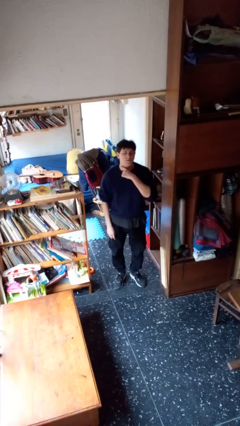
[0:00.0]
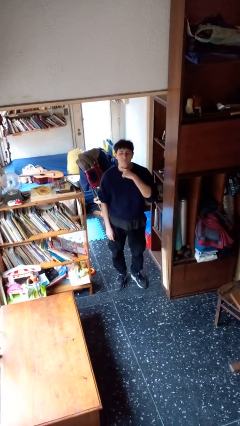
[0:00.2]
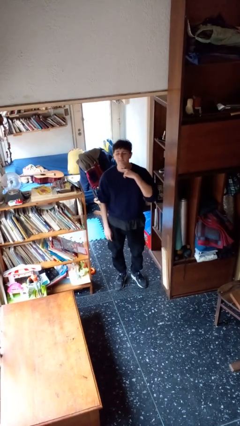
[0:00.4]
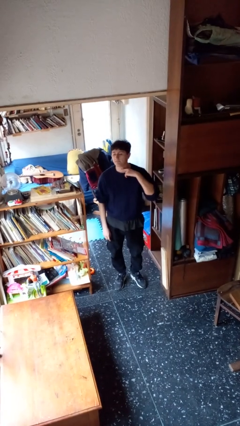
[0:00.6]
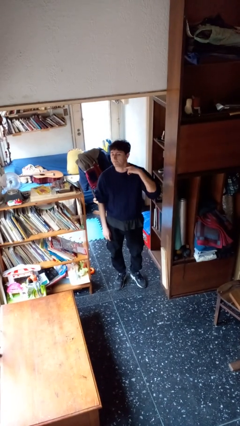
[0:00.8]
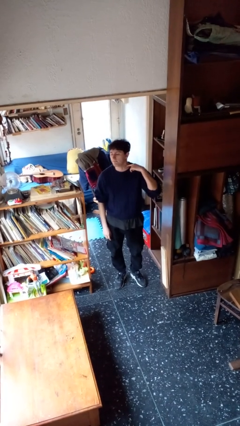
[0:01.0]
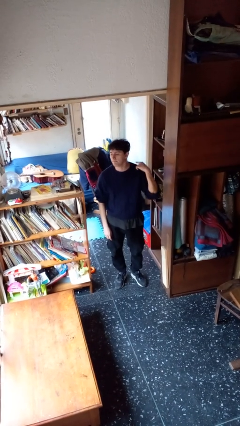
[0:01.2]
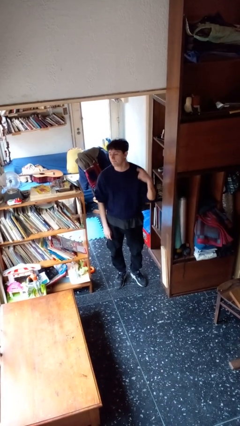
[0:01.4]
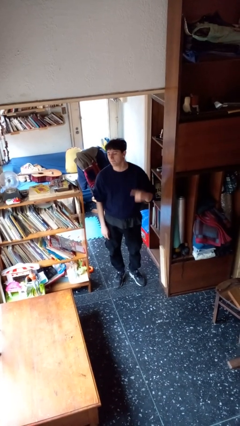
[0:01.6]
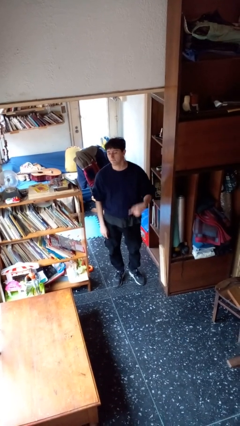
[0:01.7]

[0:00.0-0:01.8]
person gestures cut

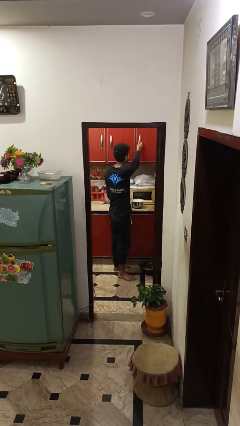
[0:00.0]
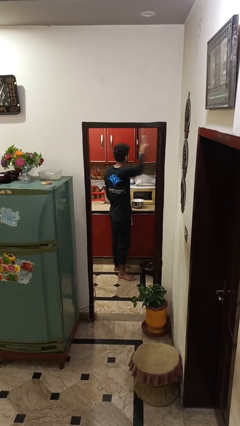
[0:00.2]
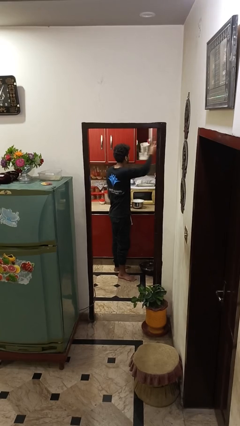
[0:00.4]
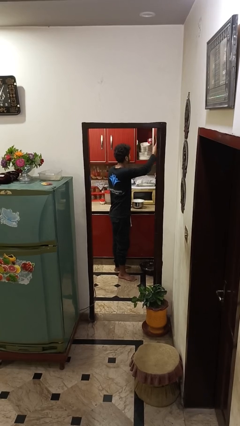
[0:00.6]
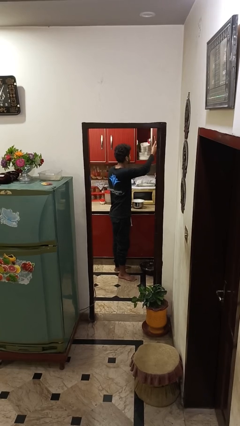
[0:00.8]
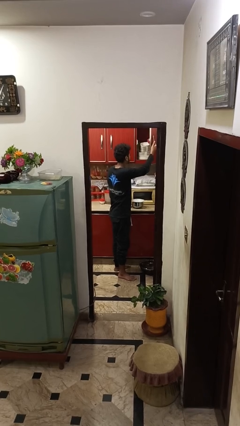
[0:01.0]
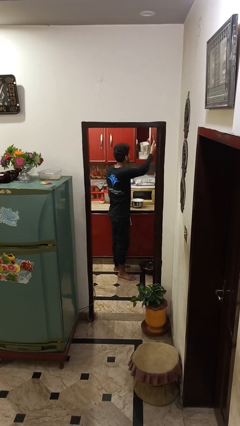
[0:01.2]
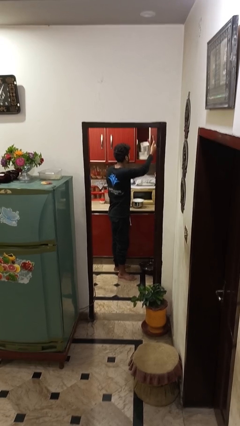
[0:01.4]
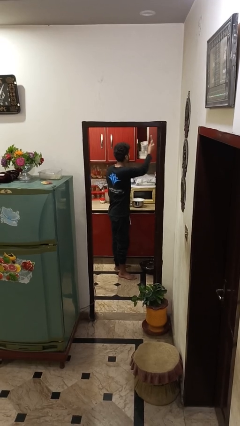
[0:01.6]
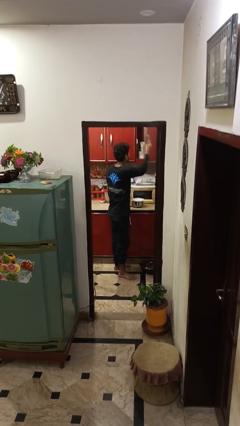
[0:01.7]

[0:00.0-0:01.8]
person opens cabinet

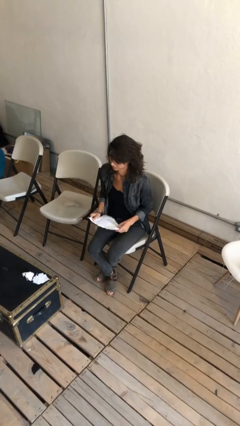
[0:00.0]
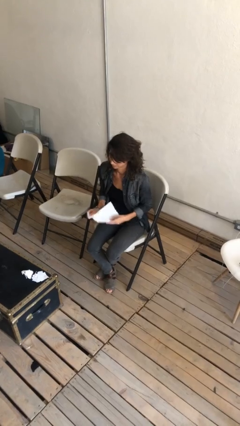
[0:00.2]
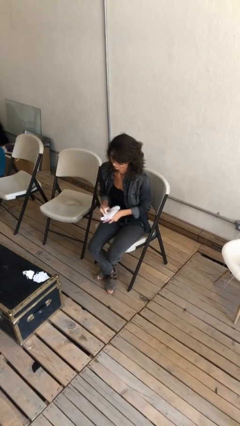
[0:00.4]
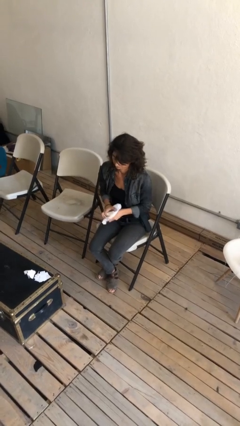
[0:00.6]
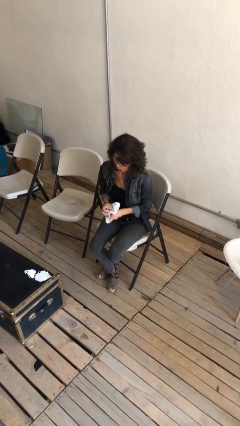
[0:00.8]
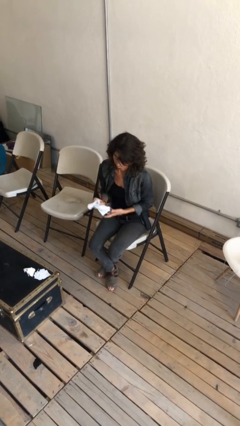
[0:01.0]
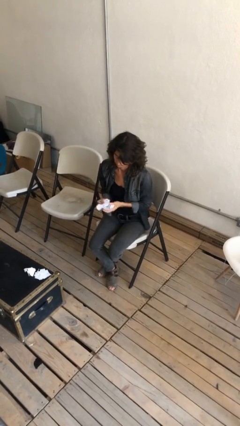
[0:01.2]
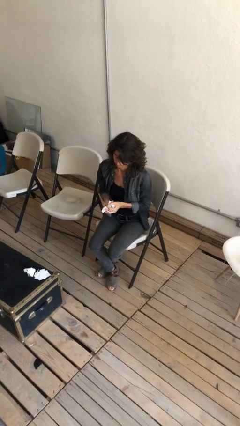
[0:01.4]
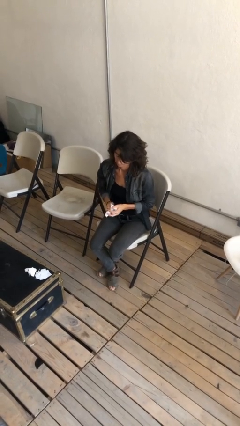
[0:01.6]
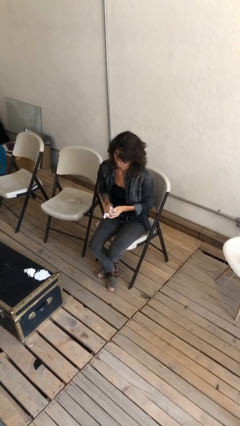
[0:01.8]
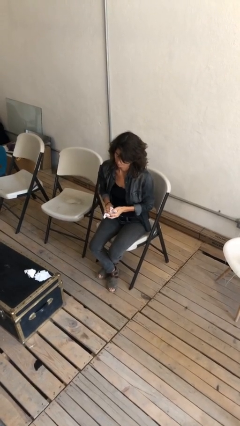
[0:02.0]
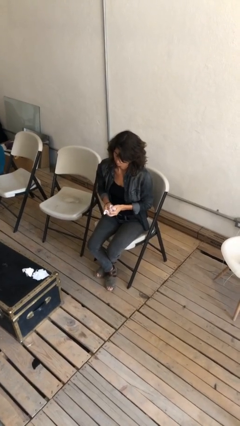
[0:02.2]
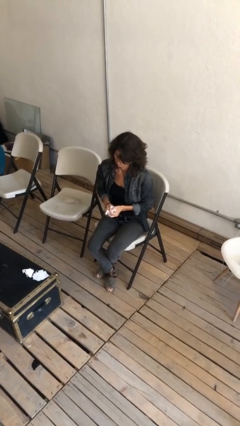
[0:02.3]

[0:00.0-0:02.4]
person crumples paper

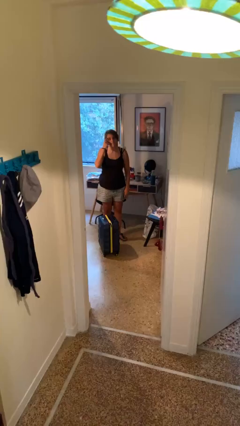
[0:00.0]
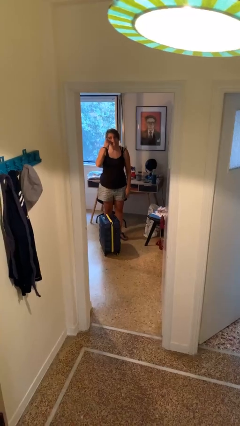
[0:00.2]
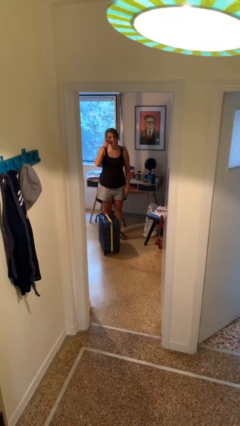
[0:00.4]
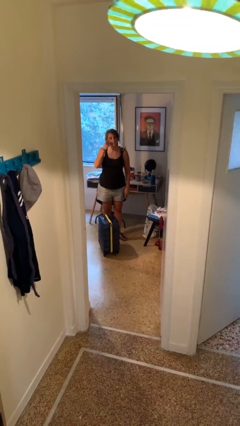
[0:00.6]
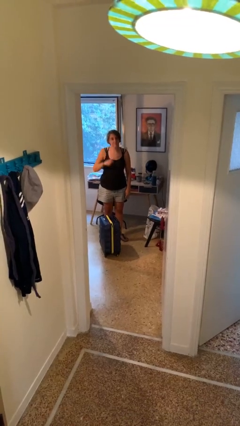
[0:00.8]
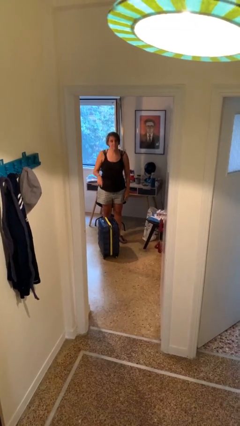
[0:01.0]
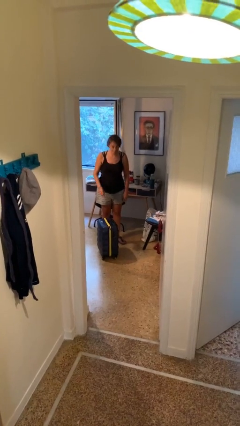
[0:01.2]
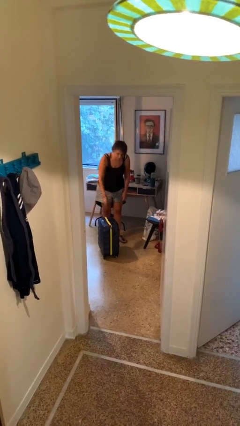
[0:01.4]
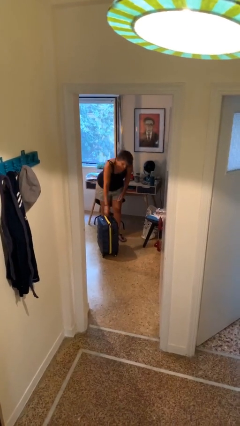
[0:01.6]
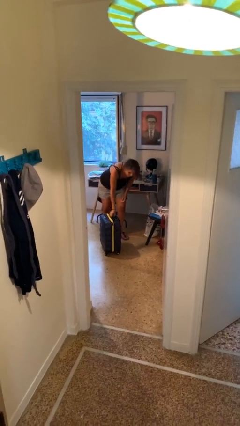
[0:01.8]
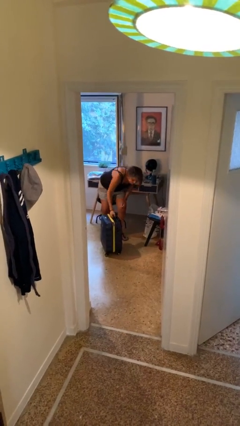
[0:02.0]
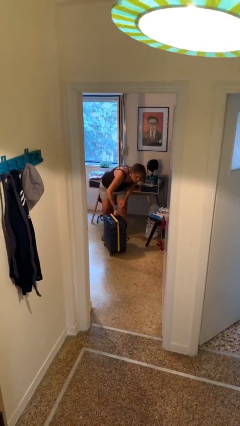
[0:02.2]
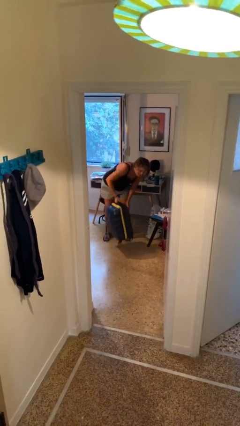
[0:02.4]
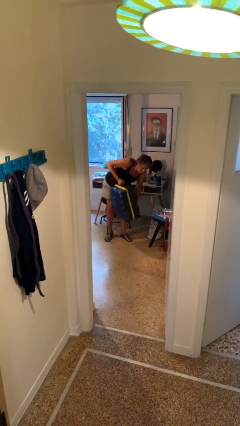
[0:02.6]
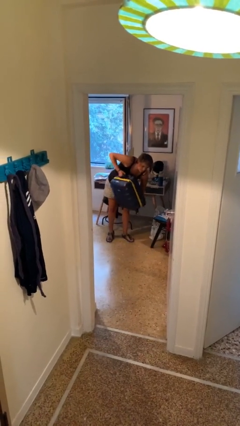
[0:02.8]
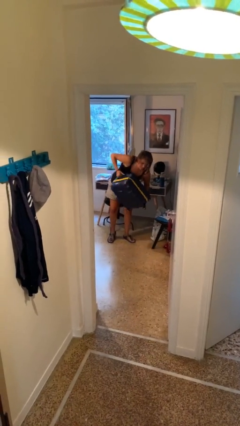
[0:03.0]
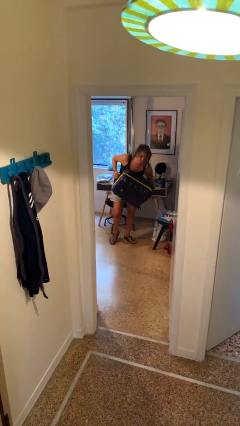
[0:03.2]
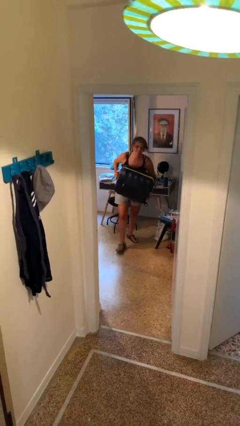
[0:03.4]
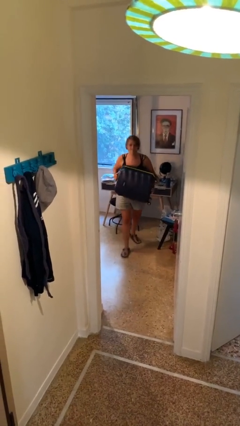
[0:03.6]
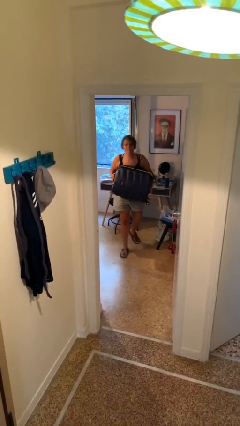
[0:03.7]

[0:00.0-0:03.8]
person picks up object from floor

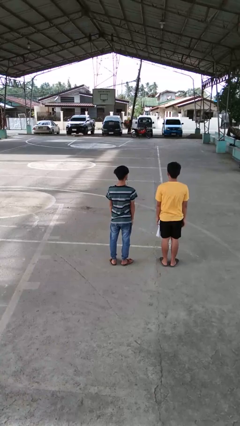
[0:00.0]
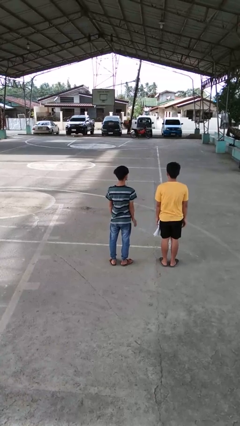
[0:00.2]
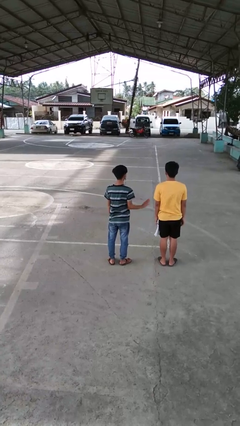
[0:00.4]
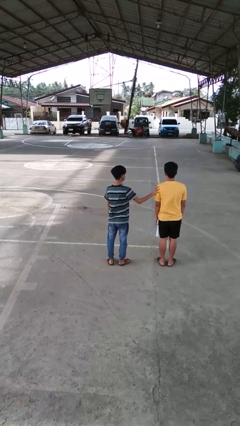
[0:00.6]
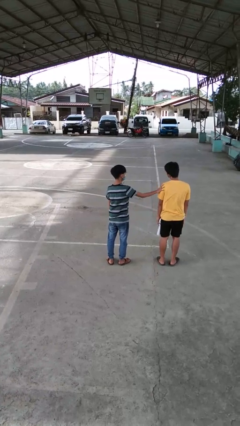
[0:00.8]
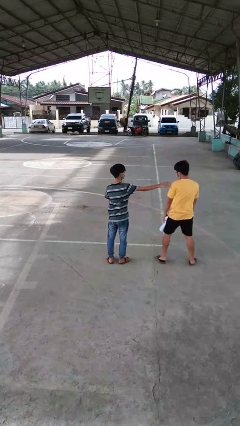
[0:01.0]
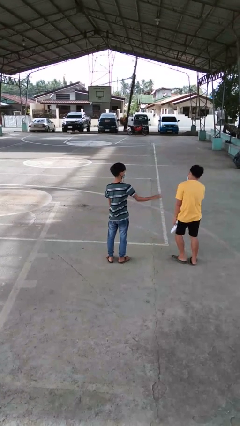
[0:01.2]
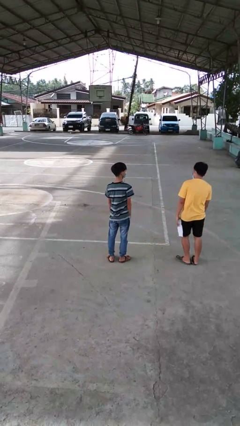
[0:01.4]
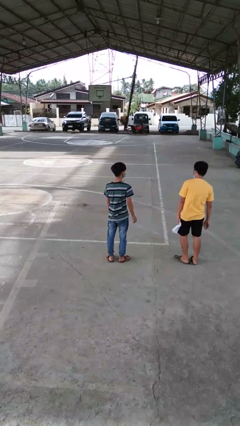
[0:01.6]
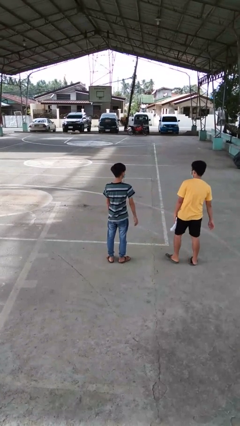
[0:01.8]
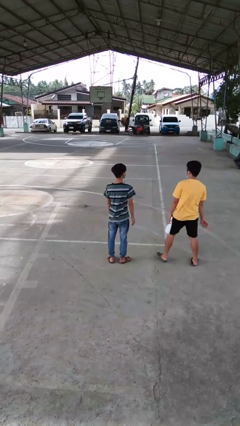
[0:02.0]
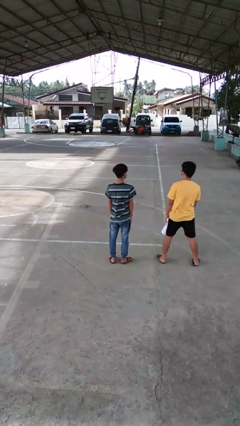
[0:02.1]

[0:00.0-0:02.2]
person shoves person

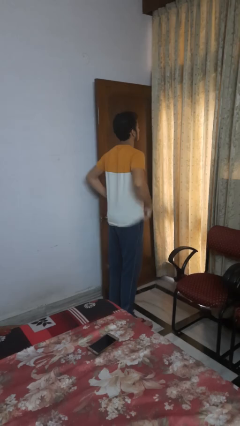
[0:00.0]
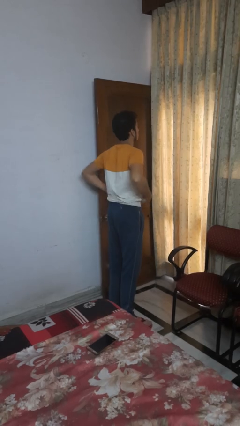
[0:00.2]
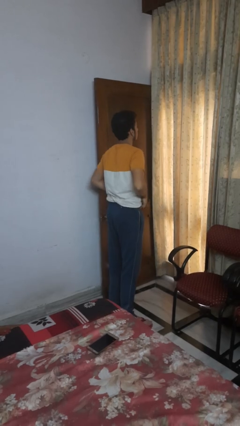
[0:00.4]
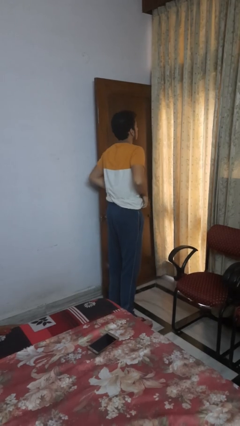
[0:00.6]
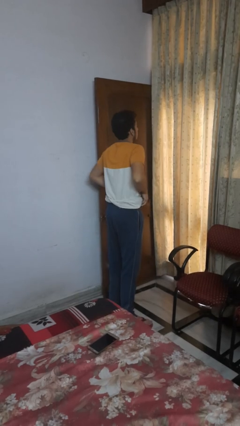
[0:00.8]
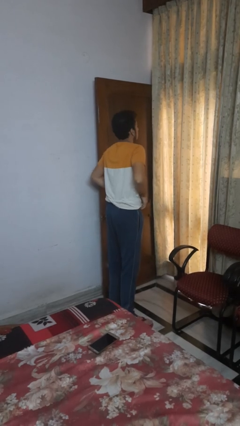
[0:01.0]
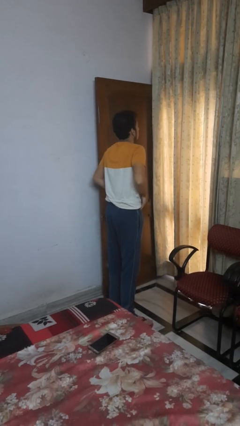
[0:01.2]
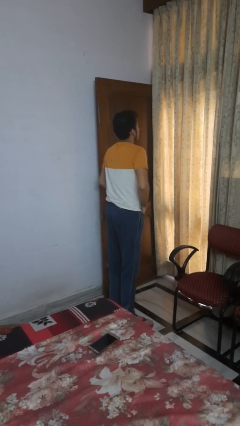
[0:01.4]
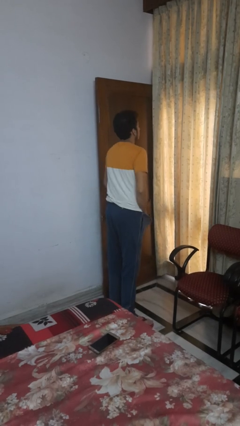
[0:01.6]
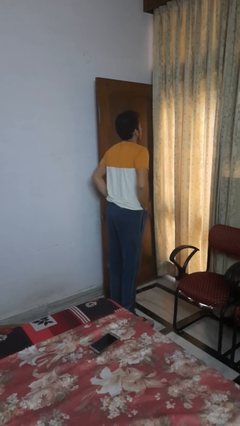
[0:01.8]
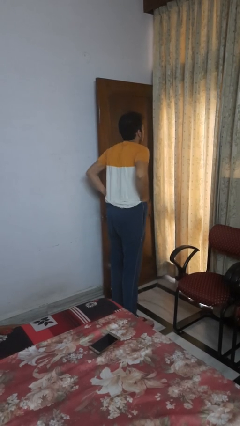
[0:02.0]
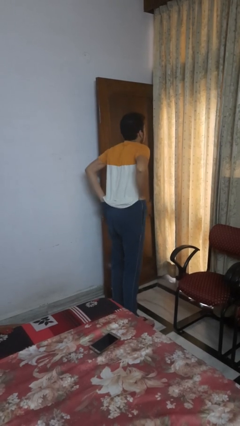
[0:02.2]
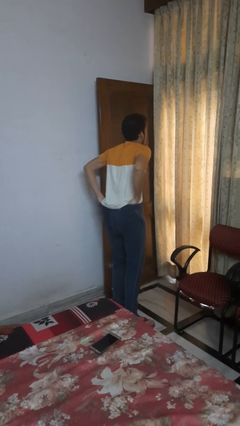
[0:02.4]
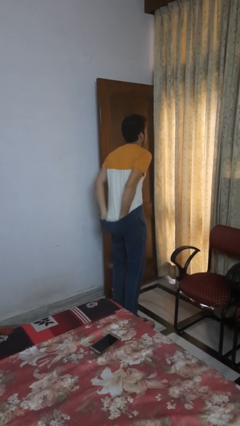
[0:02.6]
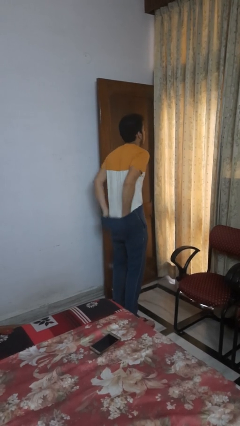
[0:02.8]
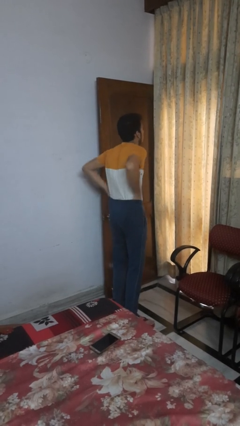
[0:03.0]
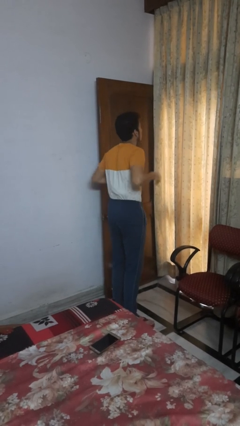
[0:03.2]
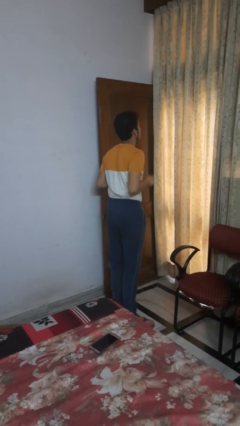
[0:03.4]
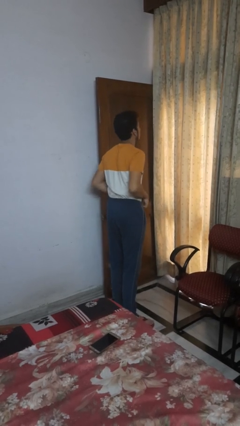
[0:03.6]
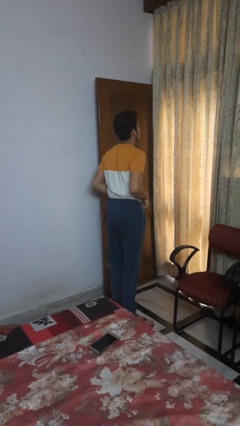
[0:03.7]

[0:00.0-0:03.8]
person tucks in shirt

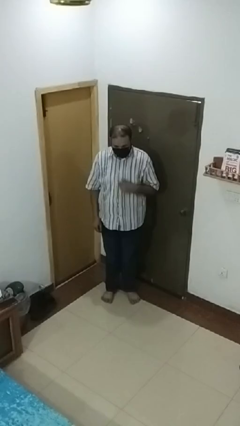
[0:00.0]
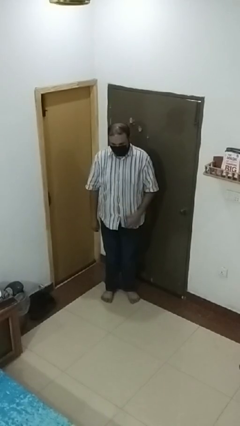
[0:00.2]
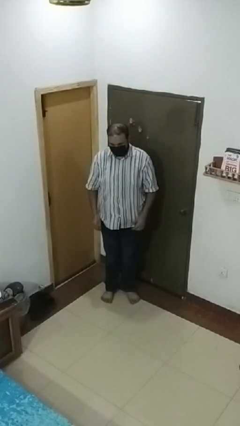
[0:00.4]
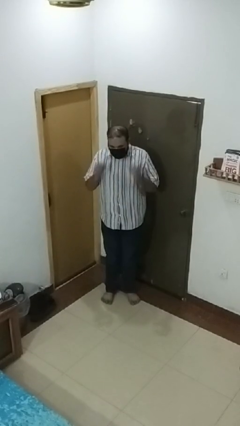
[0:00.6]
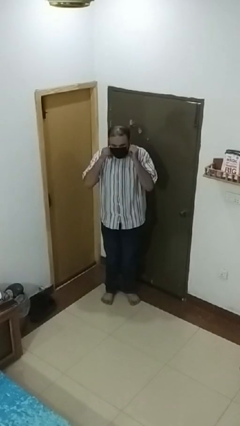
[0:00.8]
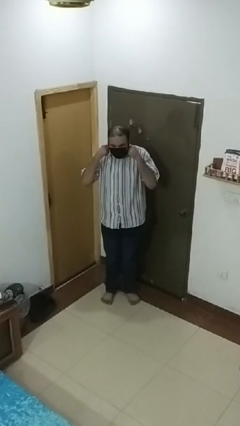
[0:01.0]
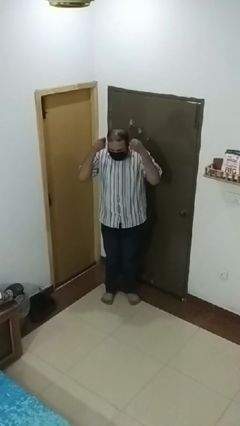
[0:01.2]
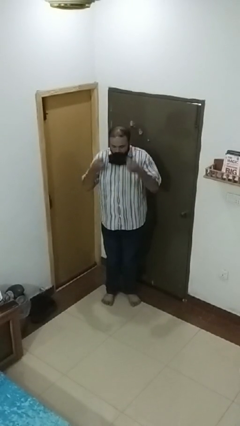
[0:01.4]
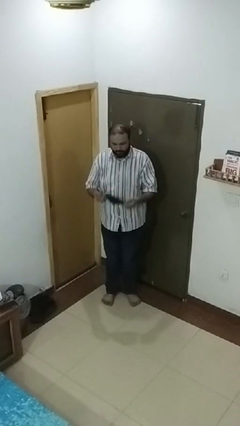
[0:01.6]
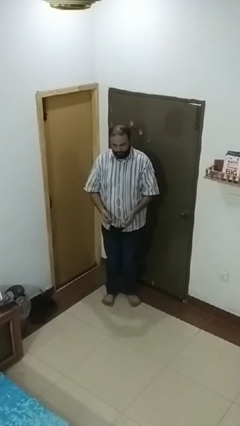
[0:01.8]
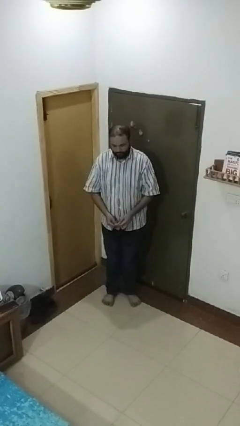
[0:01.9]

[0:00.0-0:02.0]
person takes off facemask
